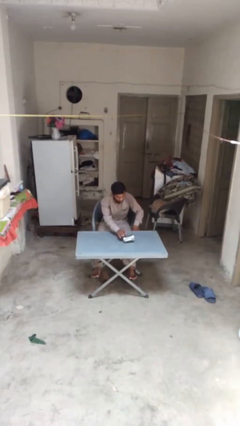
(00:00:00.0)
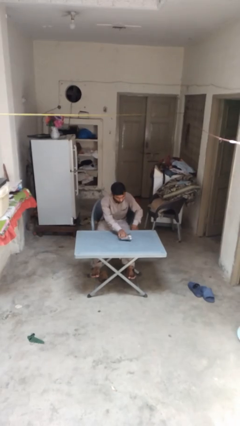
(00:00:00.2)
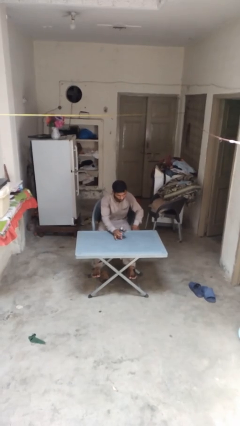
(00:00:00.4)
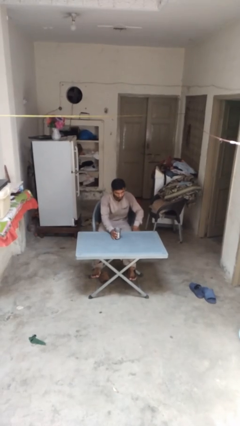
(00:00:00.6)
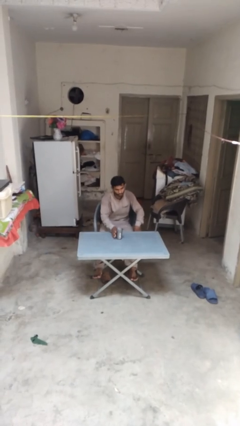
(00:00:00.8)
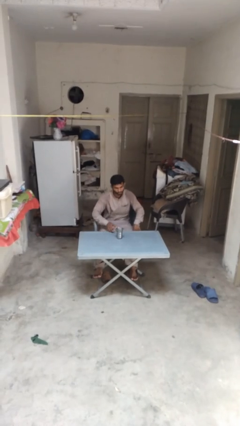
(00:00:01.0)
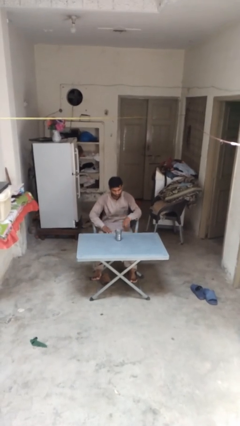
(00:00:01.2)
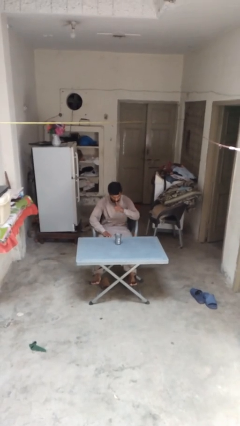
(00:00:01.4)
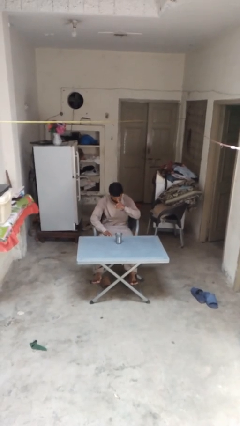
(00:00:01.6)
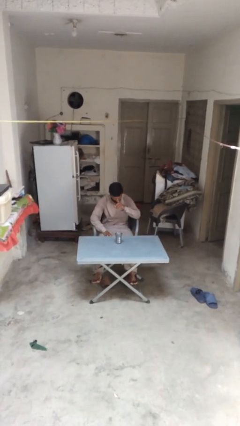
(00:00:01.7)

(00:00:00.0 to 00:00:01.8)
person sets upright glass

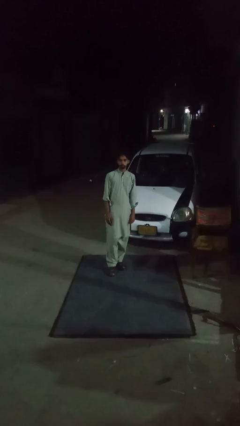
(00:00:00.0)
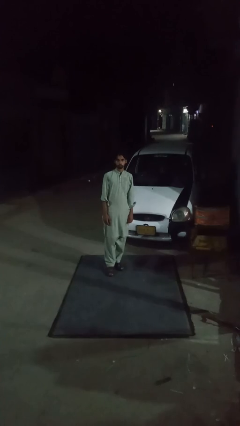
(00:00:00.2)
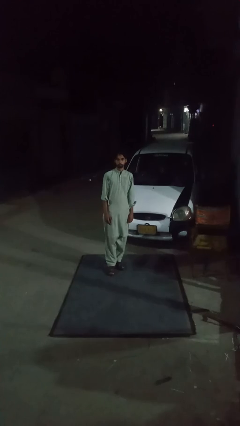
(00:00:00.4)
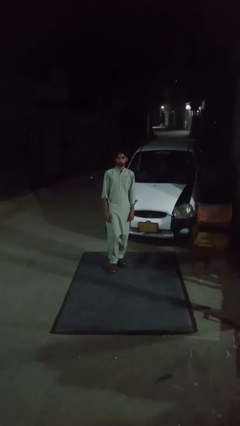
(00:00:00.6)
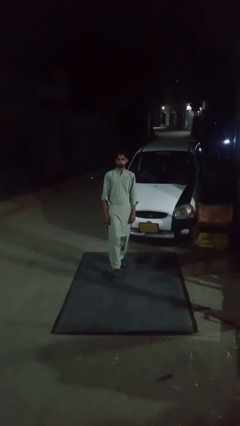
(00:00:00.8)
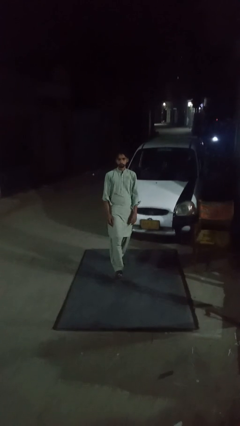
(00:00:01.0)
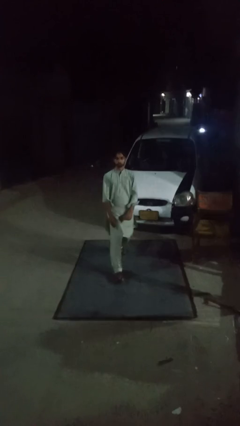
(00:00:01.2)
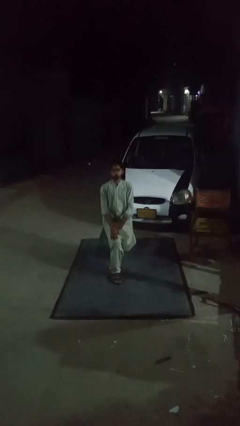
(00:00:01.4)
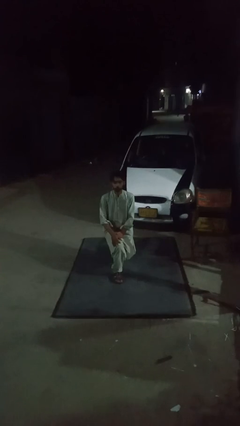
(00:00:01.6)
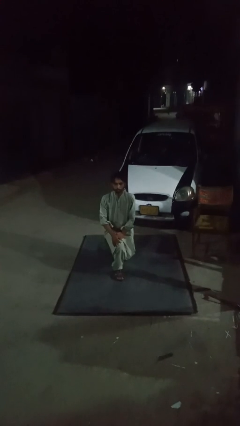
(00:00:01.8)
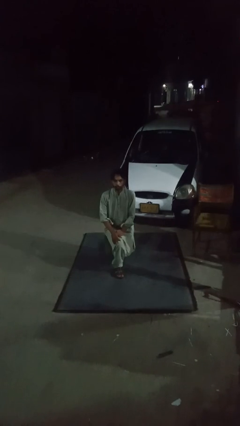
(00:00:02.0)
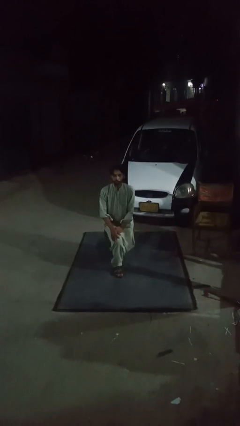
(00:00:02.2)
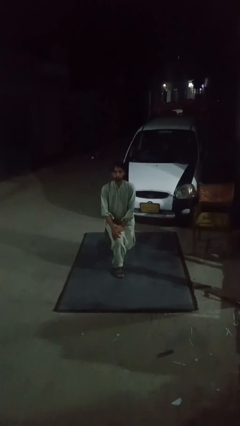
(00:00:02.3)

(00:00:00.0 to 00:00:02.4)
person exercises with lunges

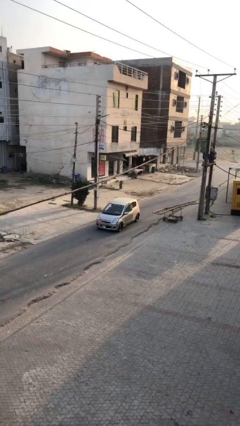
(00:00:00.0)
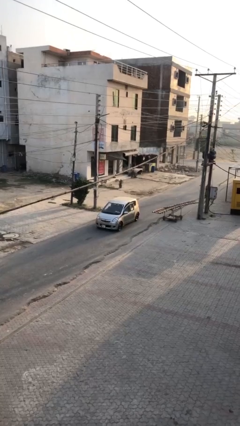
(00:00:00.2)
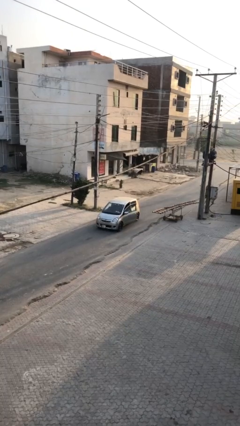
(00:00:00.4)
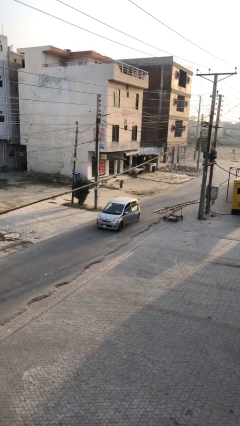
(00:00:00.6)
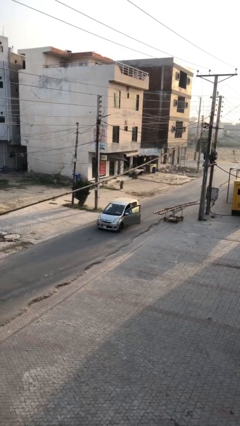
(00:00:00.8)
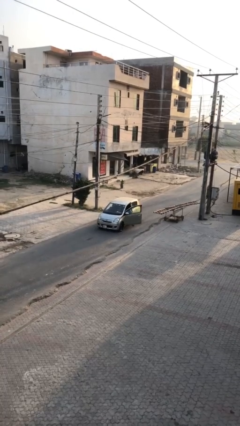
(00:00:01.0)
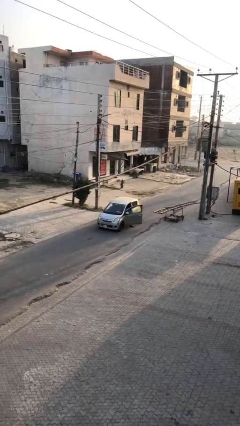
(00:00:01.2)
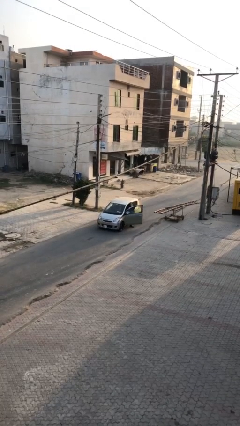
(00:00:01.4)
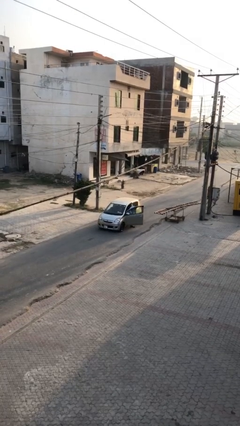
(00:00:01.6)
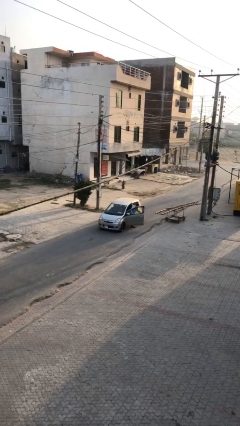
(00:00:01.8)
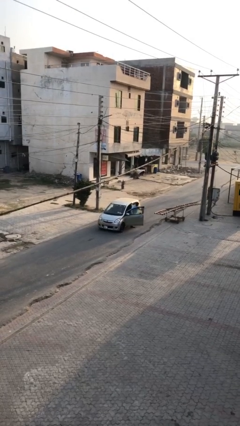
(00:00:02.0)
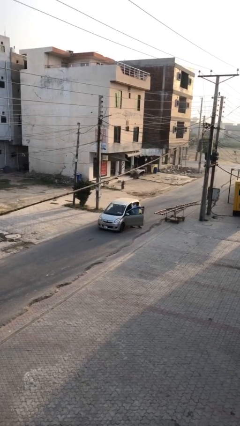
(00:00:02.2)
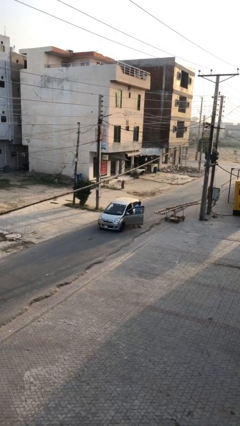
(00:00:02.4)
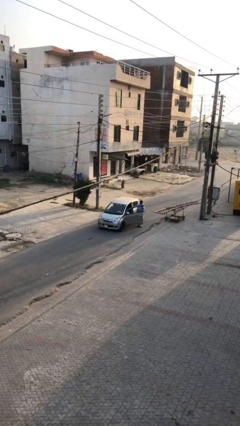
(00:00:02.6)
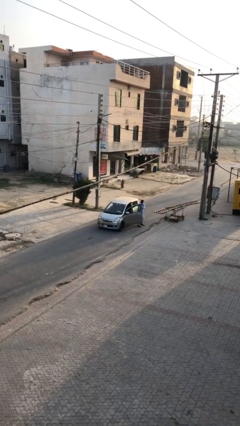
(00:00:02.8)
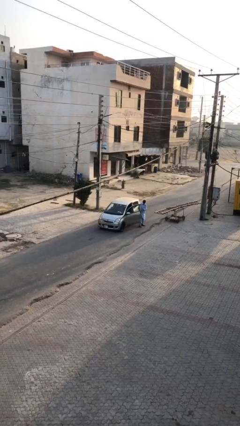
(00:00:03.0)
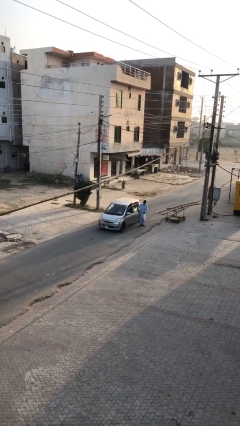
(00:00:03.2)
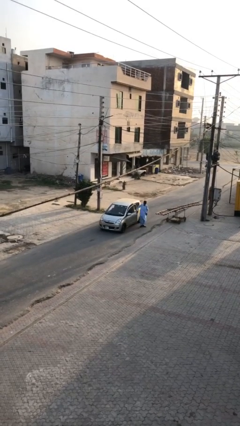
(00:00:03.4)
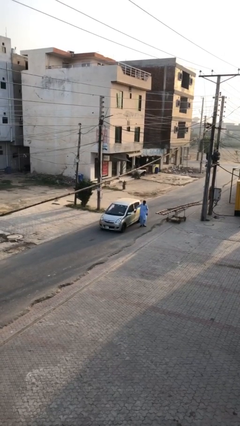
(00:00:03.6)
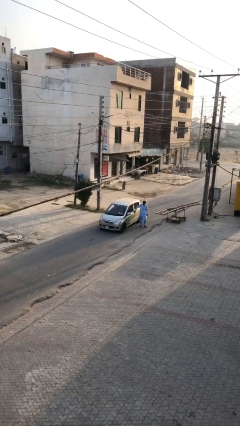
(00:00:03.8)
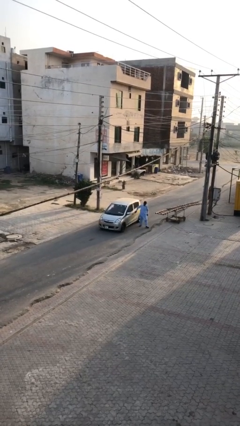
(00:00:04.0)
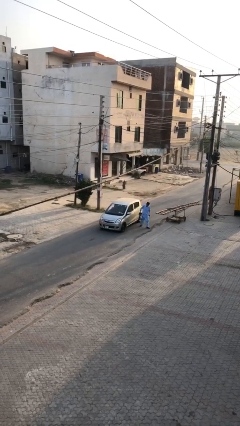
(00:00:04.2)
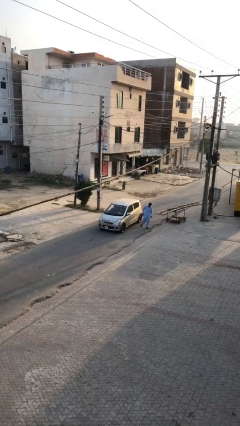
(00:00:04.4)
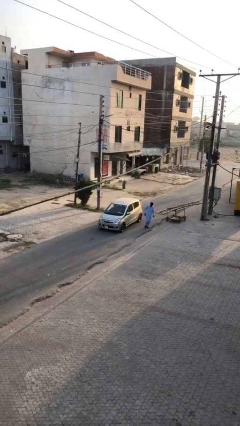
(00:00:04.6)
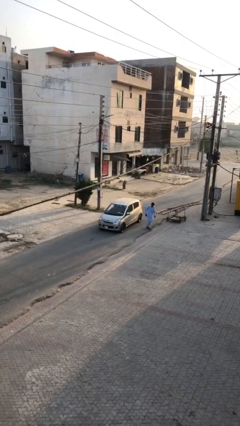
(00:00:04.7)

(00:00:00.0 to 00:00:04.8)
car drops off person

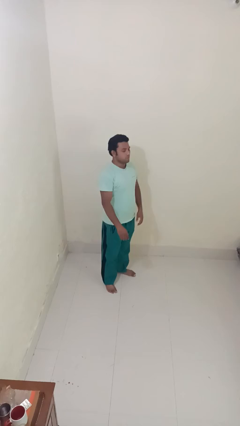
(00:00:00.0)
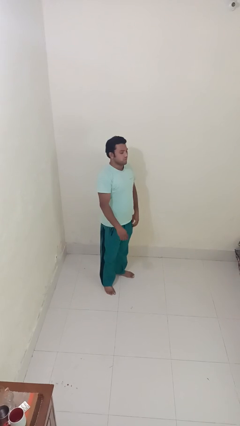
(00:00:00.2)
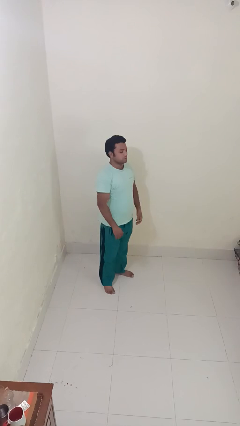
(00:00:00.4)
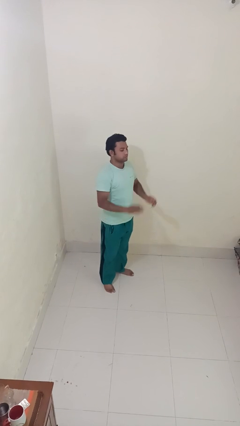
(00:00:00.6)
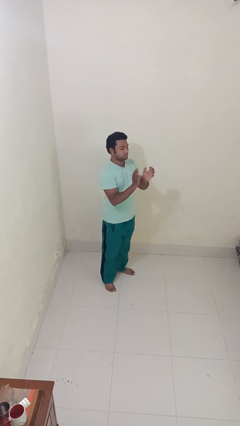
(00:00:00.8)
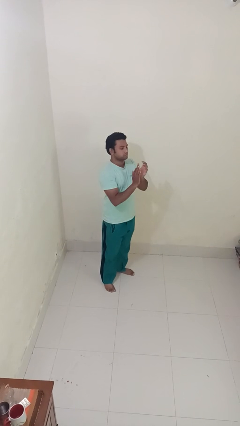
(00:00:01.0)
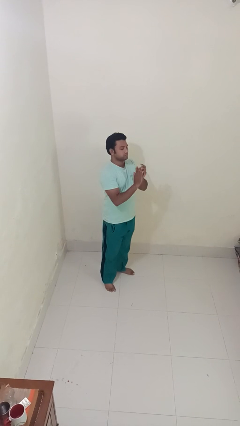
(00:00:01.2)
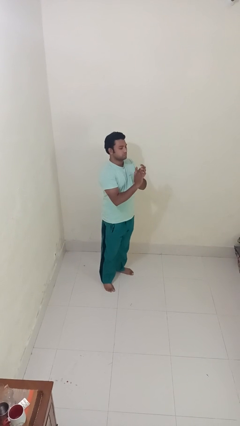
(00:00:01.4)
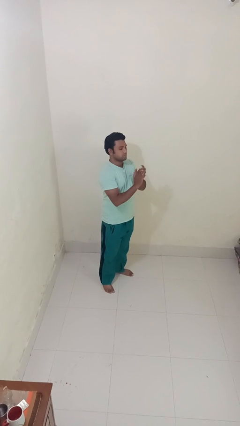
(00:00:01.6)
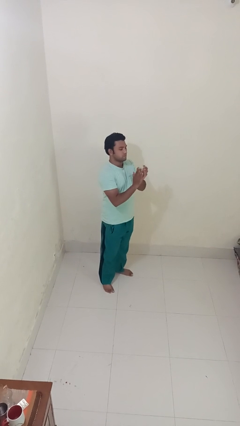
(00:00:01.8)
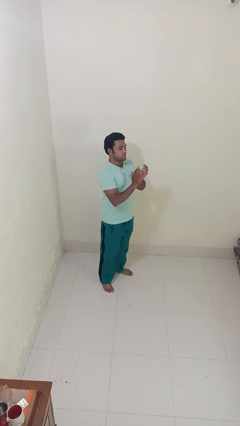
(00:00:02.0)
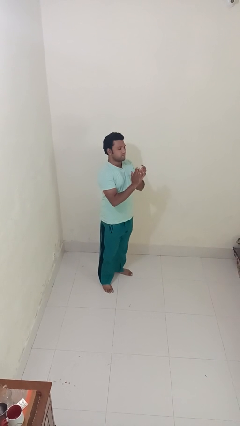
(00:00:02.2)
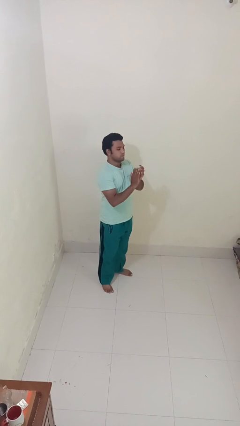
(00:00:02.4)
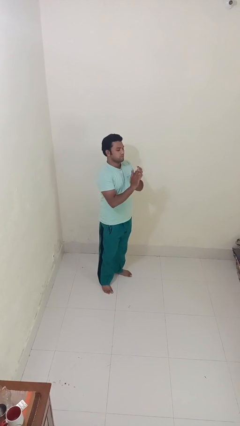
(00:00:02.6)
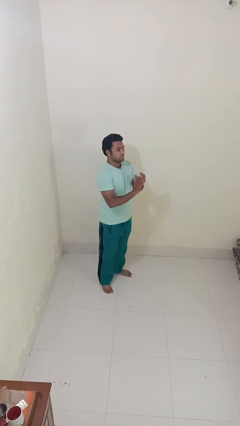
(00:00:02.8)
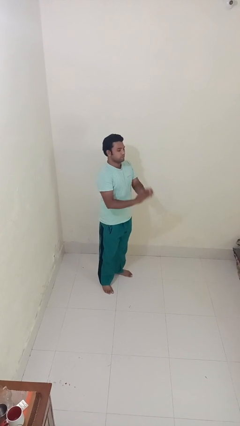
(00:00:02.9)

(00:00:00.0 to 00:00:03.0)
person claps hands

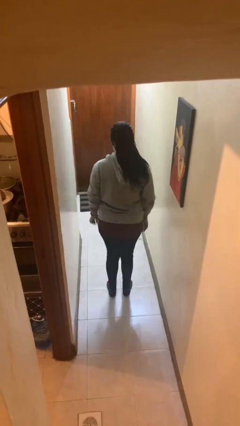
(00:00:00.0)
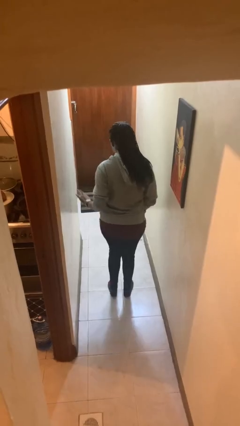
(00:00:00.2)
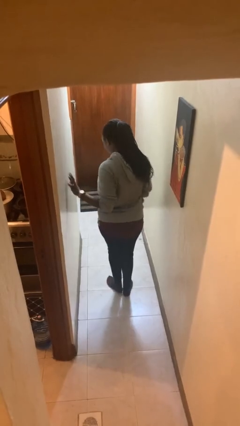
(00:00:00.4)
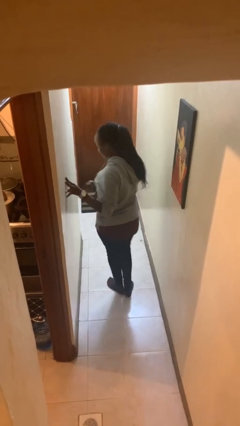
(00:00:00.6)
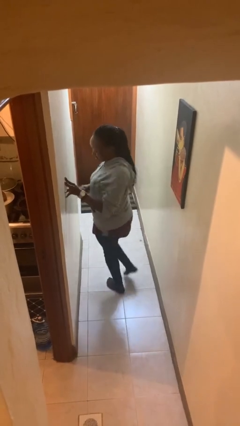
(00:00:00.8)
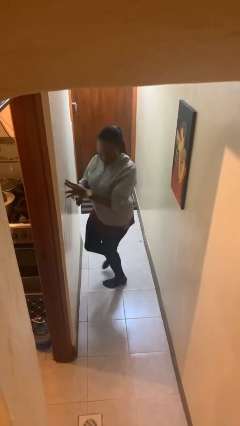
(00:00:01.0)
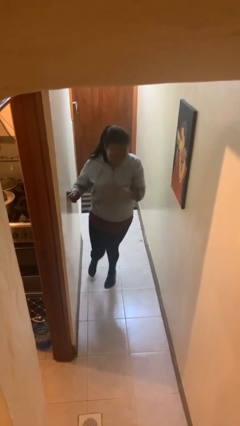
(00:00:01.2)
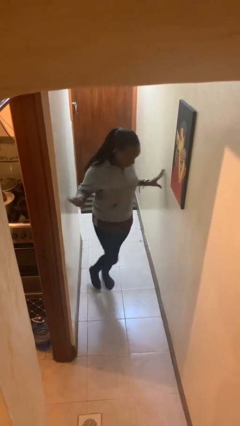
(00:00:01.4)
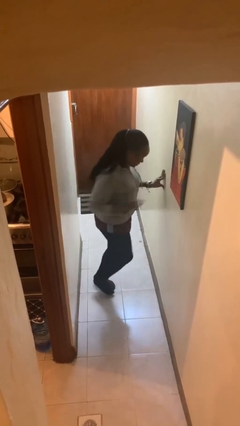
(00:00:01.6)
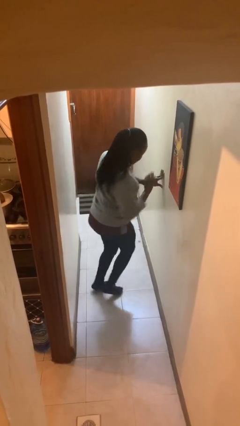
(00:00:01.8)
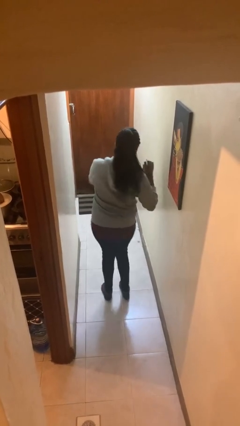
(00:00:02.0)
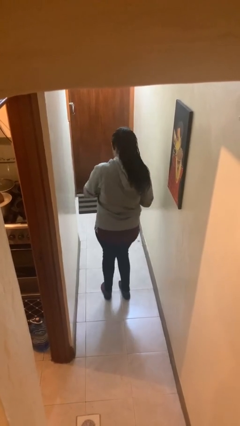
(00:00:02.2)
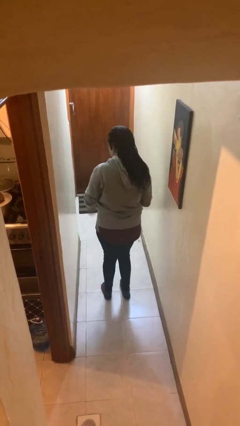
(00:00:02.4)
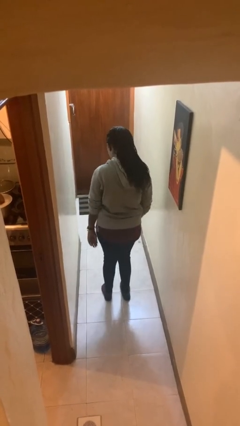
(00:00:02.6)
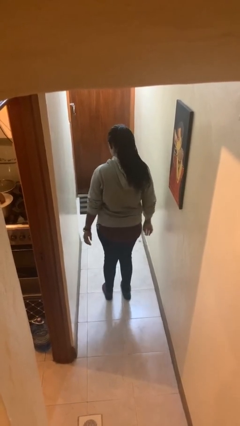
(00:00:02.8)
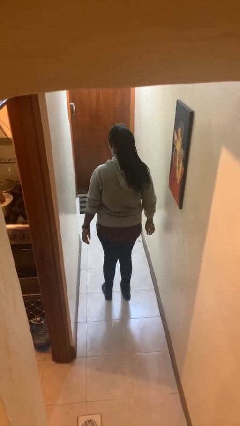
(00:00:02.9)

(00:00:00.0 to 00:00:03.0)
person twirls

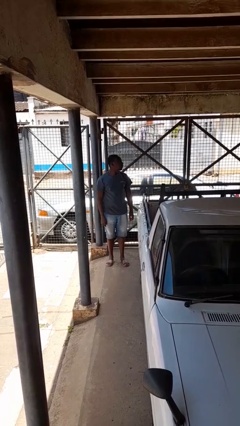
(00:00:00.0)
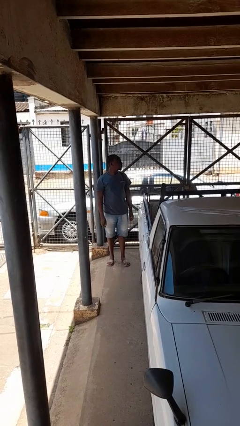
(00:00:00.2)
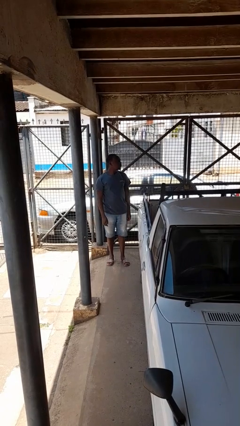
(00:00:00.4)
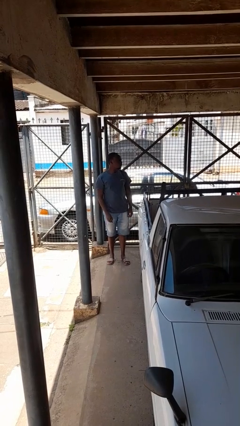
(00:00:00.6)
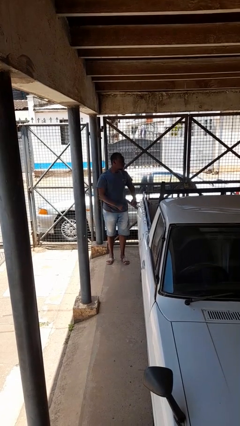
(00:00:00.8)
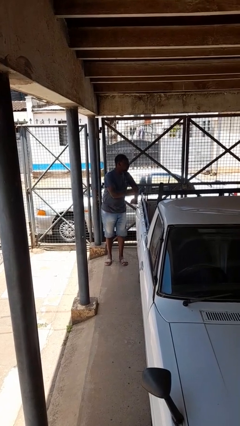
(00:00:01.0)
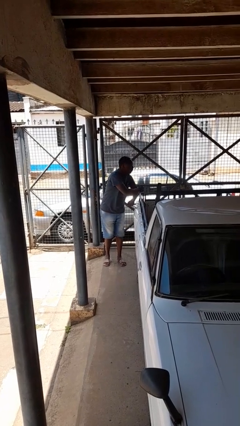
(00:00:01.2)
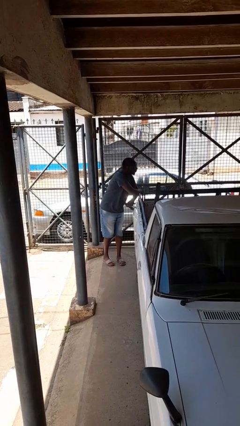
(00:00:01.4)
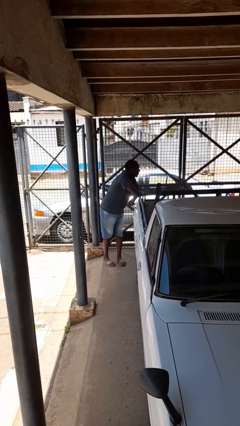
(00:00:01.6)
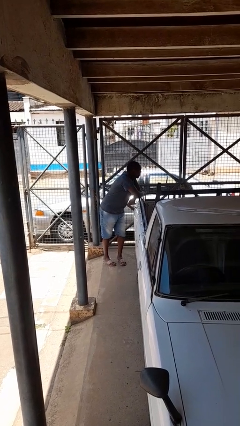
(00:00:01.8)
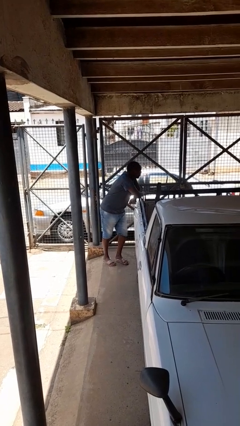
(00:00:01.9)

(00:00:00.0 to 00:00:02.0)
person leans against car

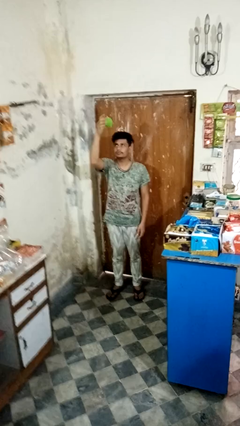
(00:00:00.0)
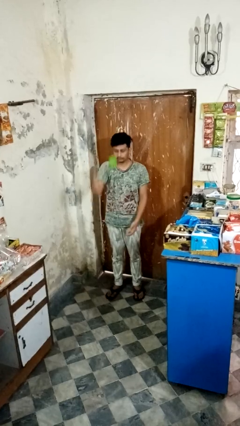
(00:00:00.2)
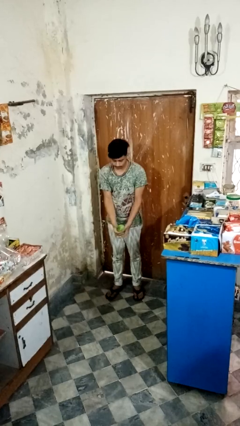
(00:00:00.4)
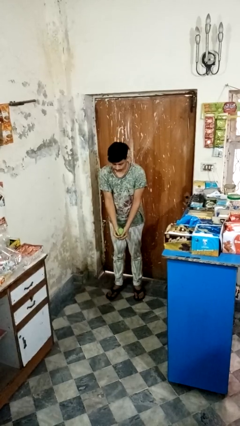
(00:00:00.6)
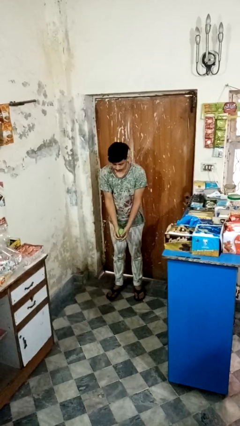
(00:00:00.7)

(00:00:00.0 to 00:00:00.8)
person catches dropped object
